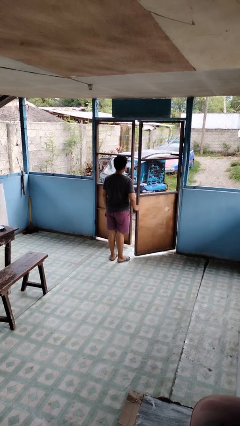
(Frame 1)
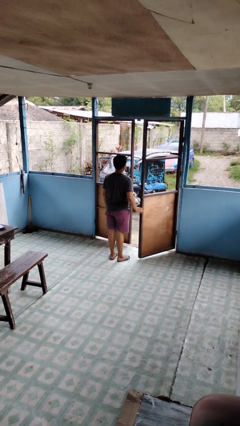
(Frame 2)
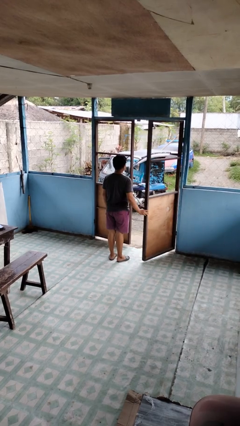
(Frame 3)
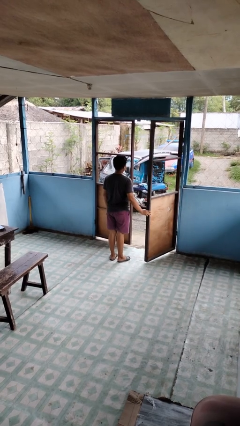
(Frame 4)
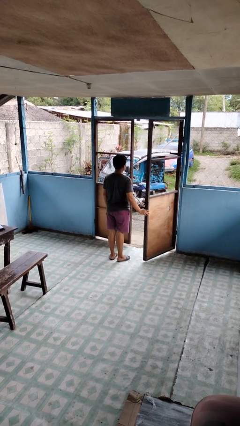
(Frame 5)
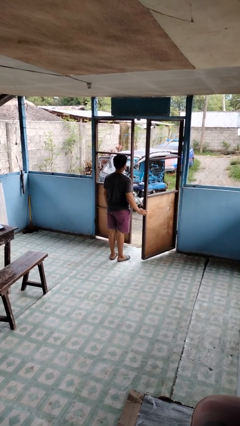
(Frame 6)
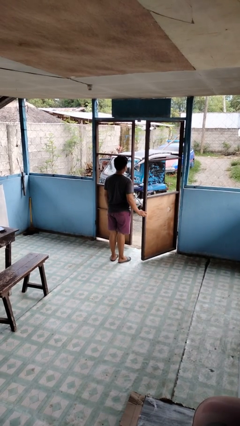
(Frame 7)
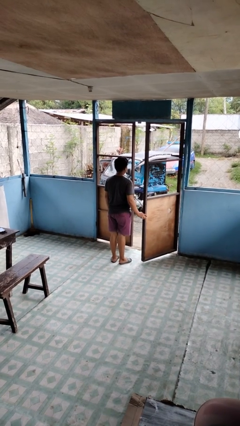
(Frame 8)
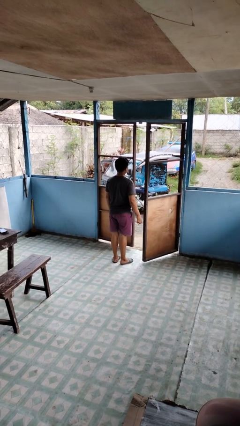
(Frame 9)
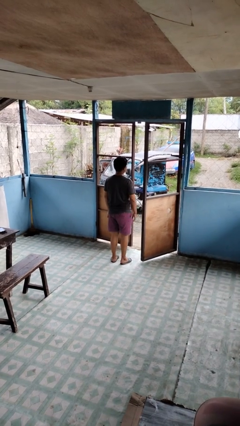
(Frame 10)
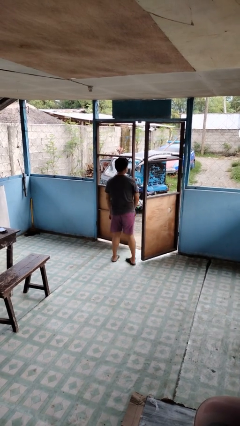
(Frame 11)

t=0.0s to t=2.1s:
person opens facility door

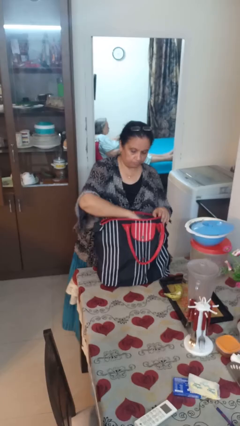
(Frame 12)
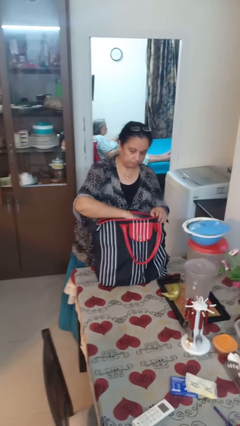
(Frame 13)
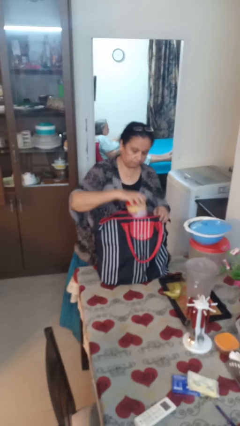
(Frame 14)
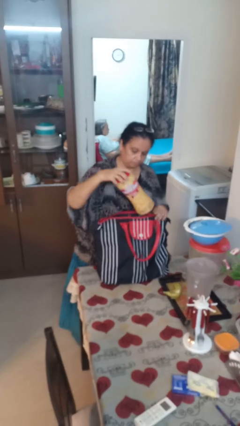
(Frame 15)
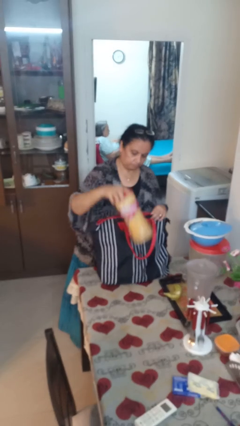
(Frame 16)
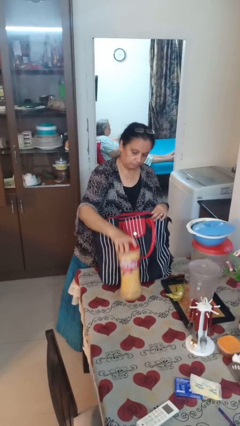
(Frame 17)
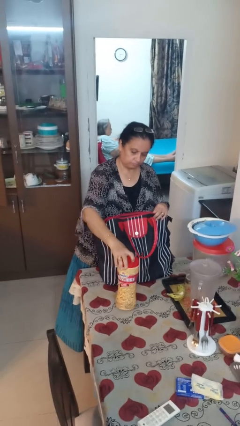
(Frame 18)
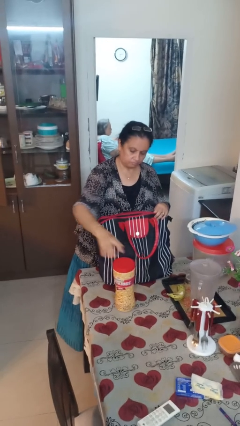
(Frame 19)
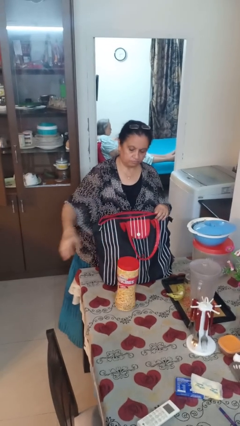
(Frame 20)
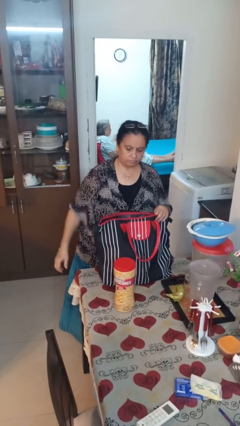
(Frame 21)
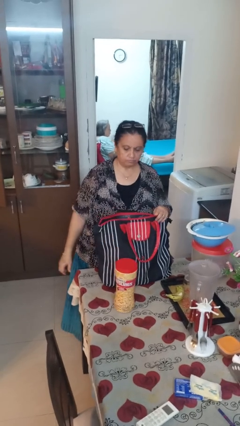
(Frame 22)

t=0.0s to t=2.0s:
person takes object from bag

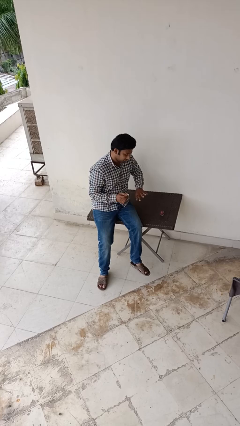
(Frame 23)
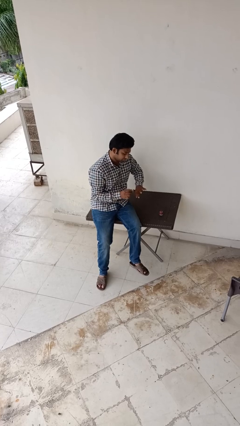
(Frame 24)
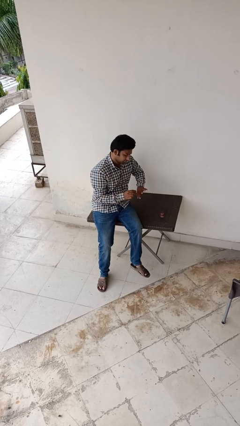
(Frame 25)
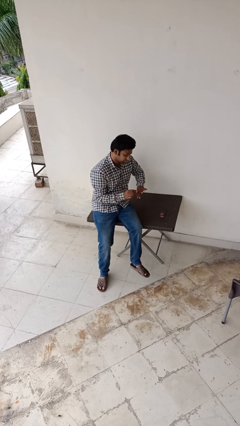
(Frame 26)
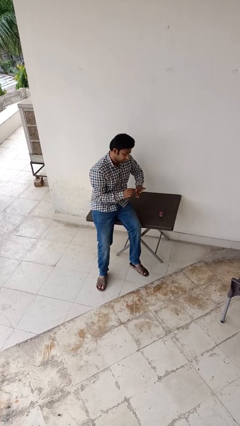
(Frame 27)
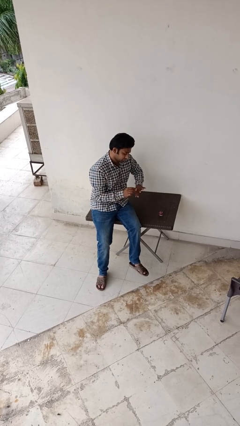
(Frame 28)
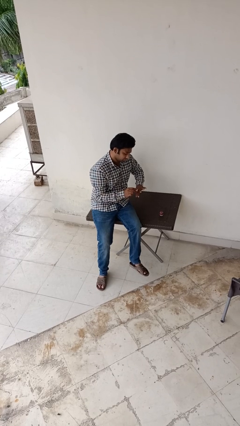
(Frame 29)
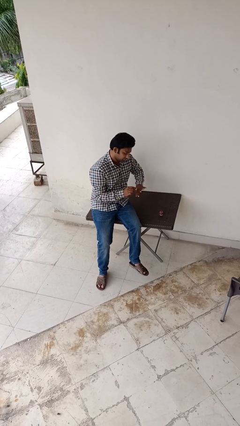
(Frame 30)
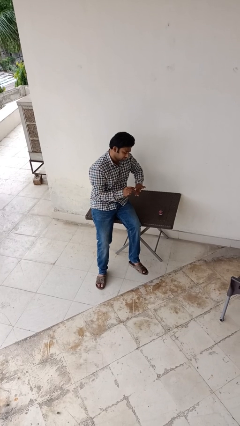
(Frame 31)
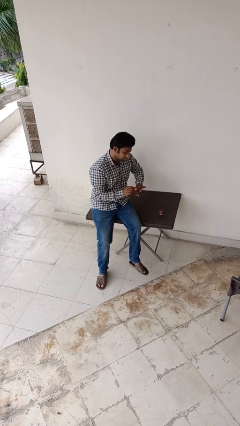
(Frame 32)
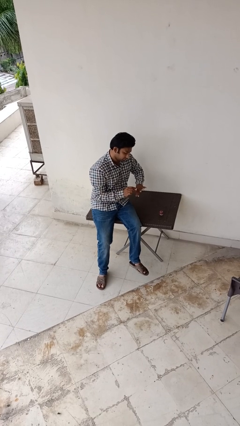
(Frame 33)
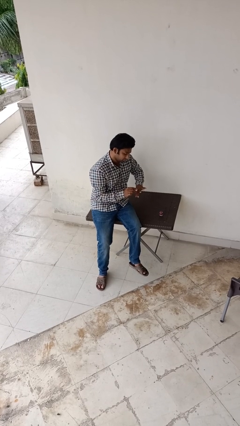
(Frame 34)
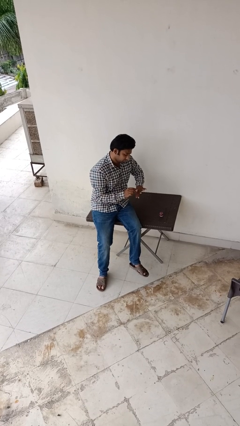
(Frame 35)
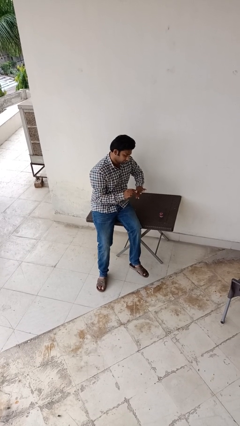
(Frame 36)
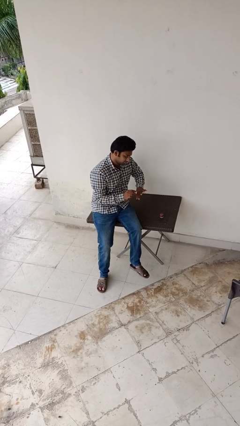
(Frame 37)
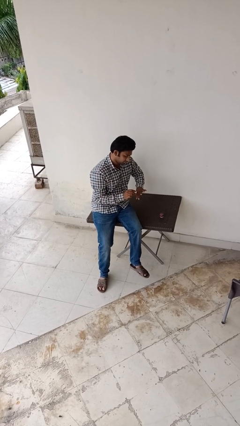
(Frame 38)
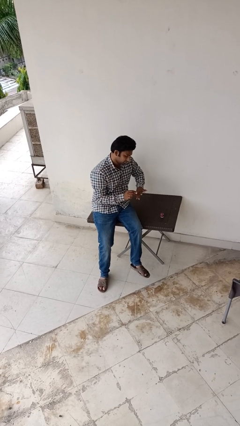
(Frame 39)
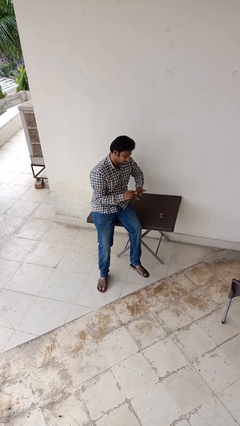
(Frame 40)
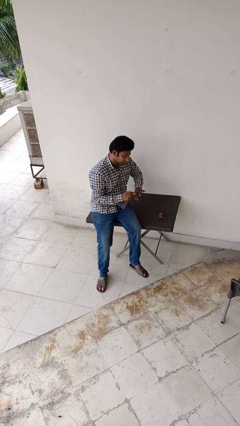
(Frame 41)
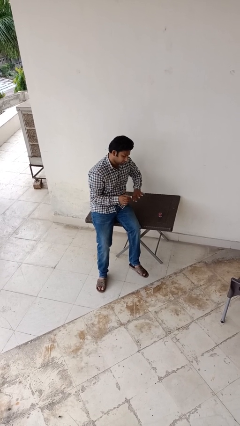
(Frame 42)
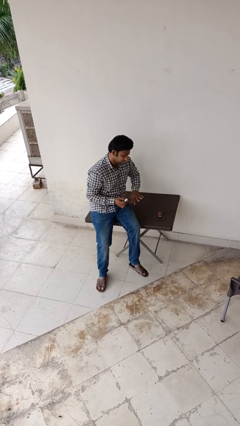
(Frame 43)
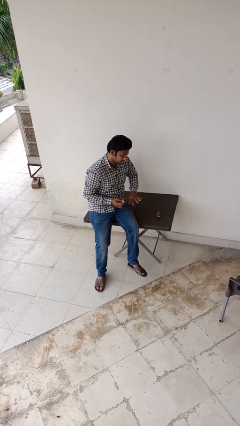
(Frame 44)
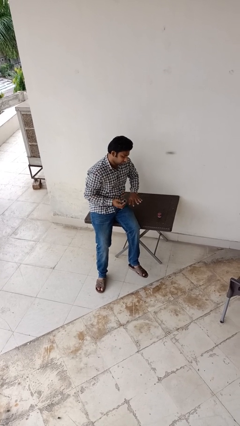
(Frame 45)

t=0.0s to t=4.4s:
person paints fingernails

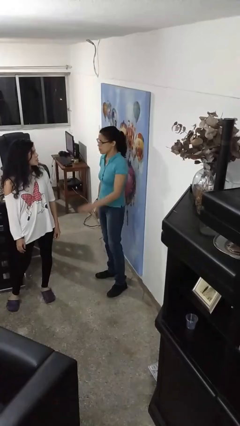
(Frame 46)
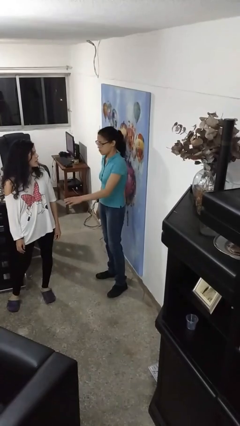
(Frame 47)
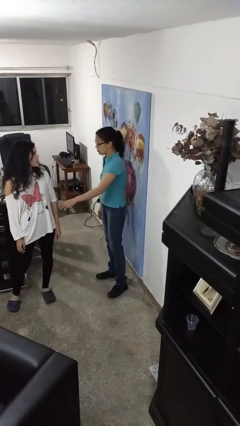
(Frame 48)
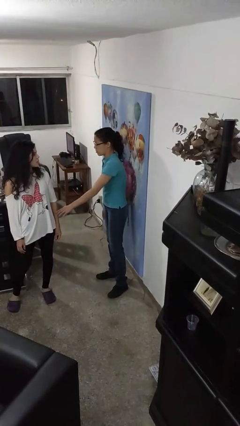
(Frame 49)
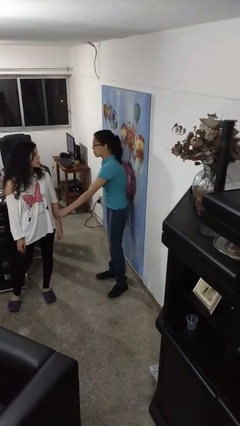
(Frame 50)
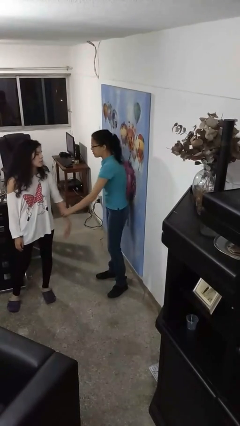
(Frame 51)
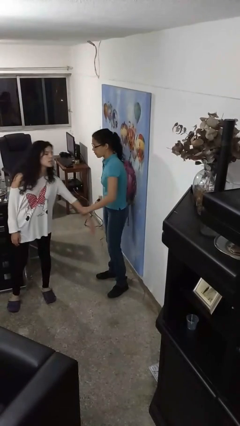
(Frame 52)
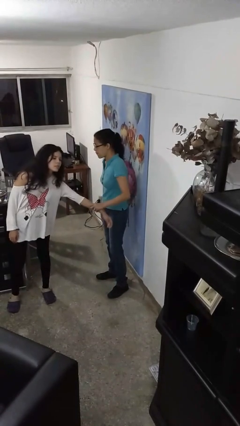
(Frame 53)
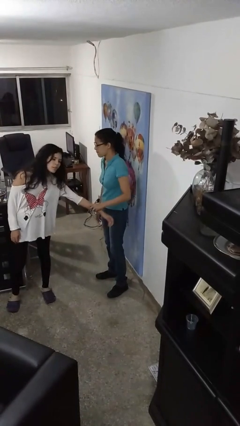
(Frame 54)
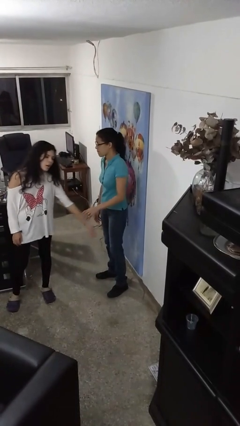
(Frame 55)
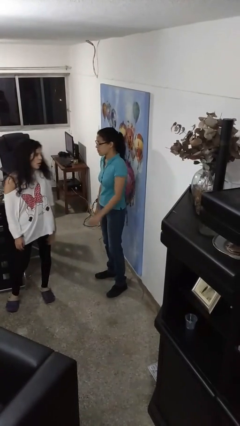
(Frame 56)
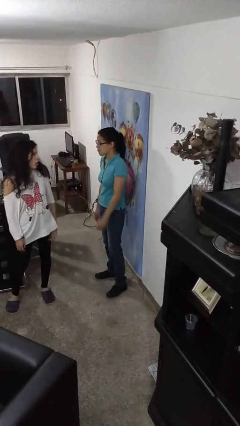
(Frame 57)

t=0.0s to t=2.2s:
person grabs person by forearm

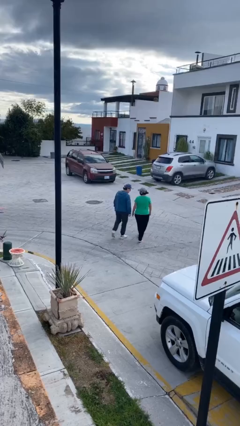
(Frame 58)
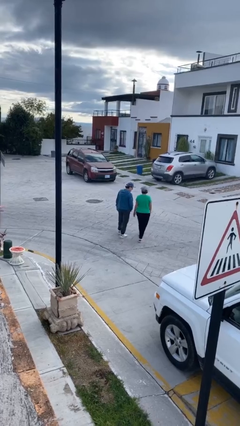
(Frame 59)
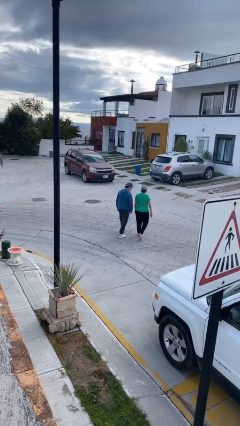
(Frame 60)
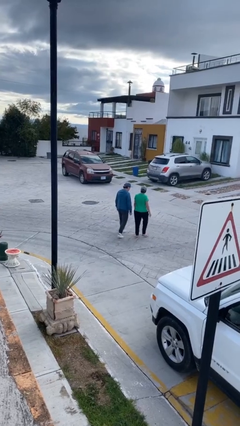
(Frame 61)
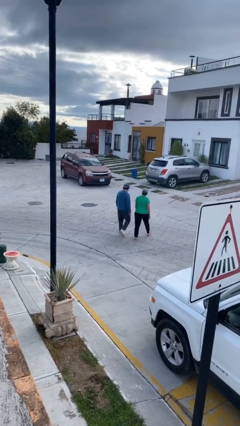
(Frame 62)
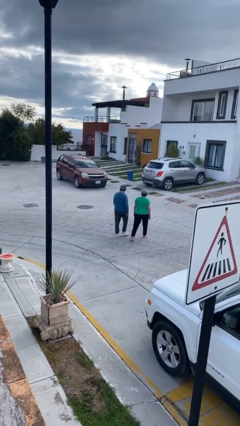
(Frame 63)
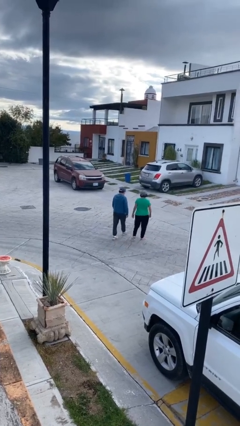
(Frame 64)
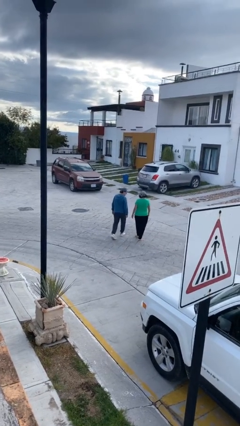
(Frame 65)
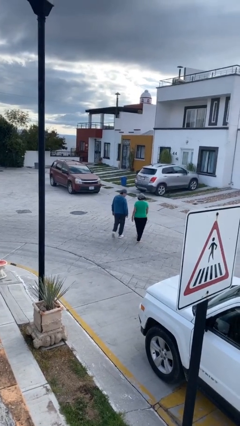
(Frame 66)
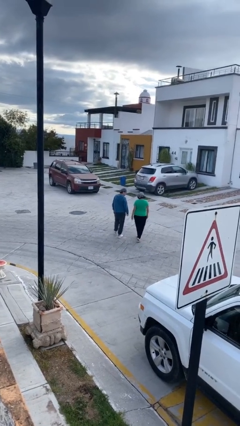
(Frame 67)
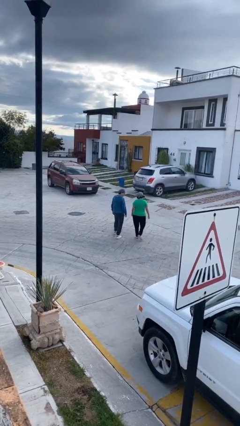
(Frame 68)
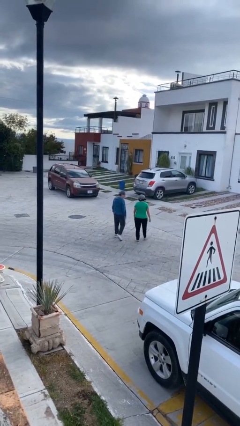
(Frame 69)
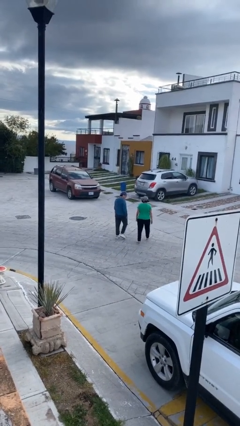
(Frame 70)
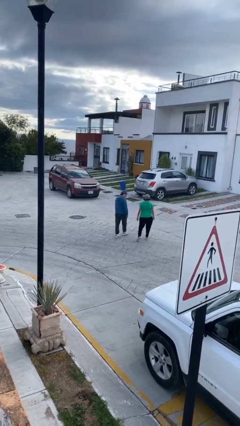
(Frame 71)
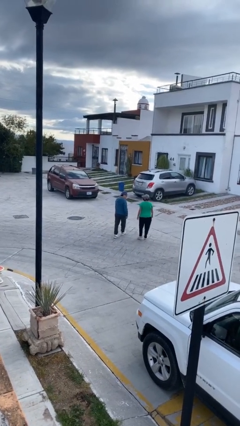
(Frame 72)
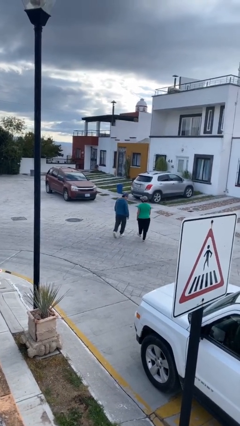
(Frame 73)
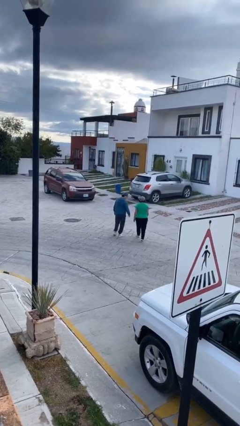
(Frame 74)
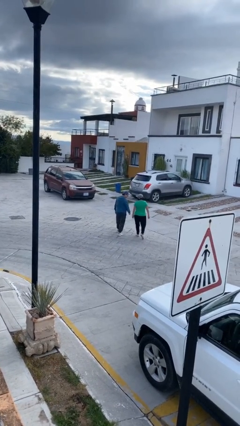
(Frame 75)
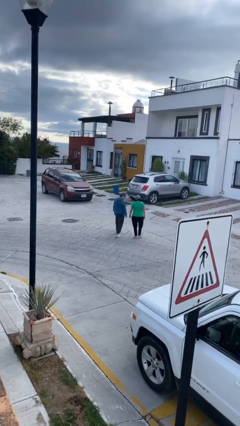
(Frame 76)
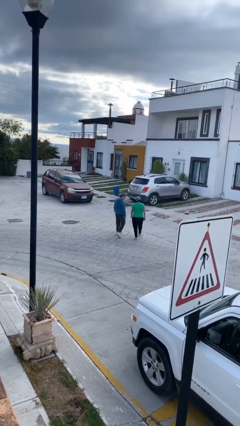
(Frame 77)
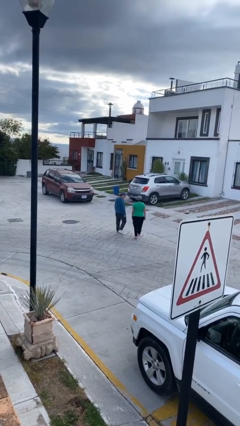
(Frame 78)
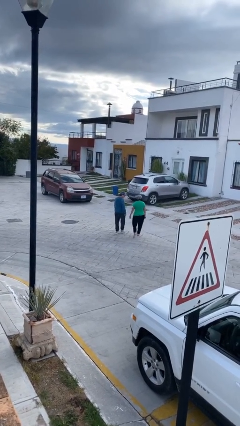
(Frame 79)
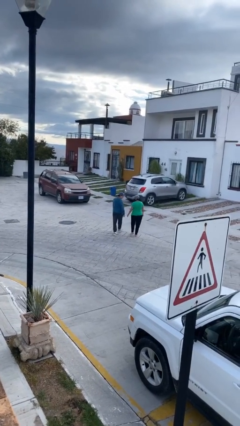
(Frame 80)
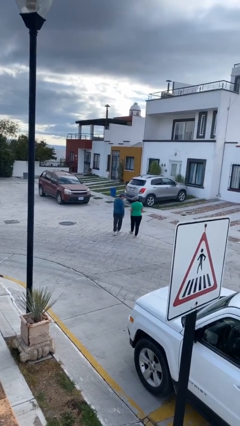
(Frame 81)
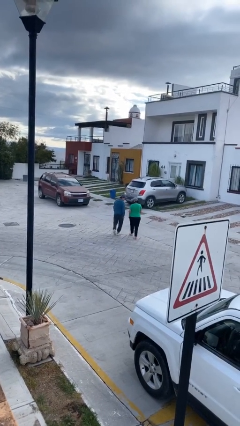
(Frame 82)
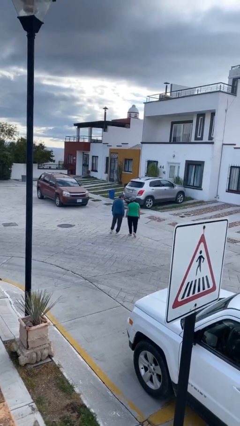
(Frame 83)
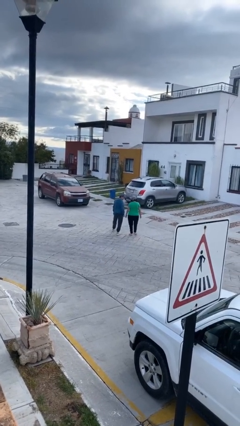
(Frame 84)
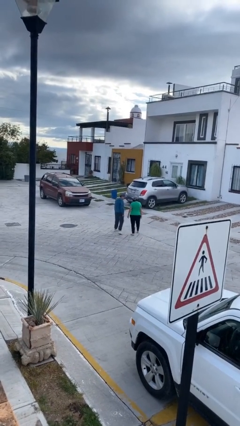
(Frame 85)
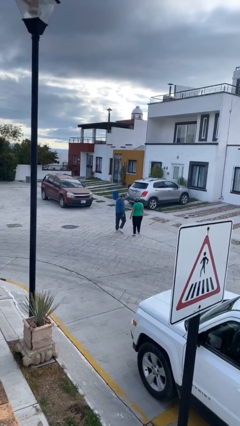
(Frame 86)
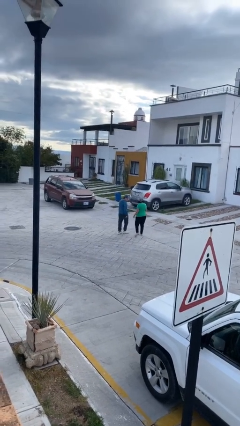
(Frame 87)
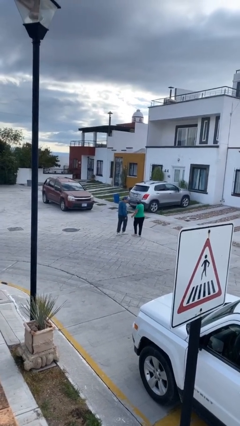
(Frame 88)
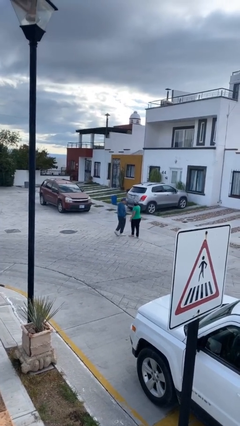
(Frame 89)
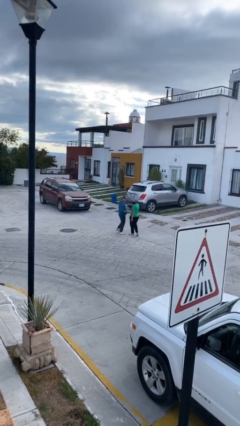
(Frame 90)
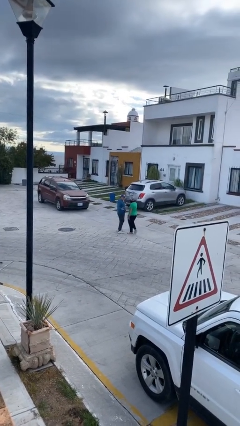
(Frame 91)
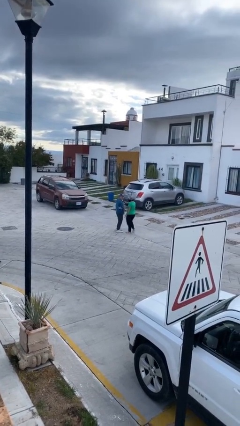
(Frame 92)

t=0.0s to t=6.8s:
person talks to person
